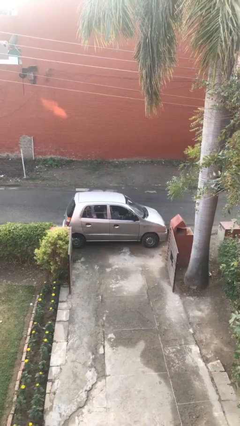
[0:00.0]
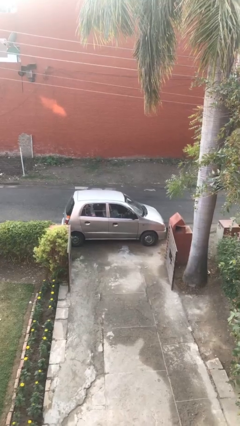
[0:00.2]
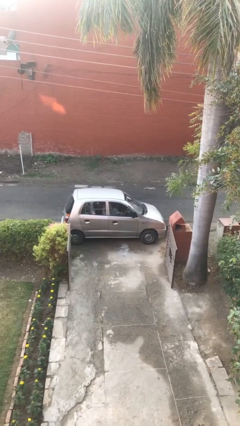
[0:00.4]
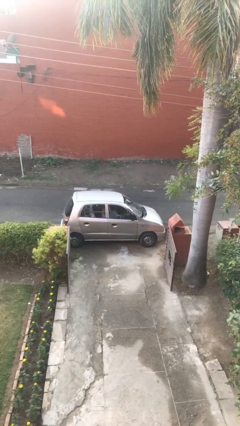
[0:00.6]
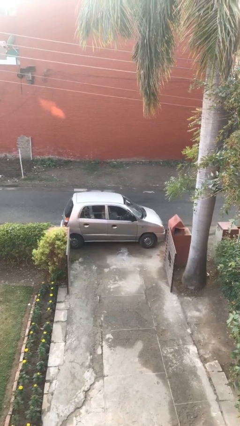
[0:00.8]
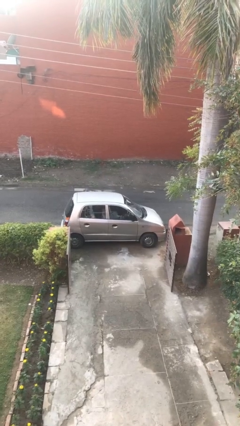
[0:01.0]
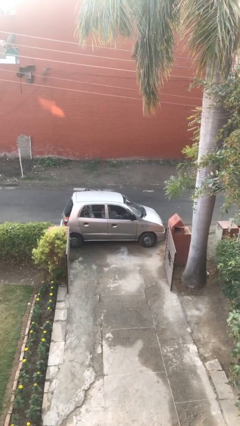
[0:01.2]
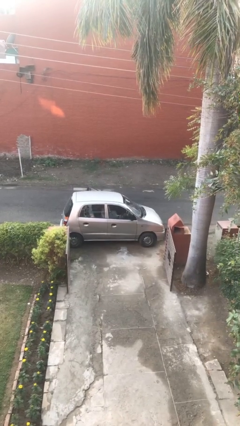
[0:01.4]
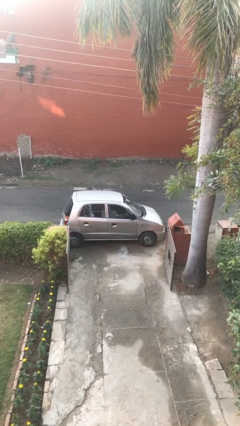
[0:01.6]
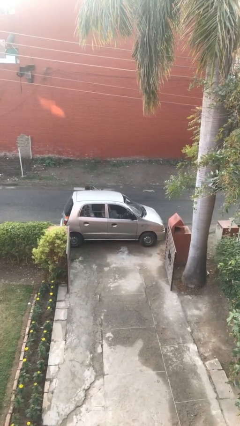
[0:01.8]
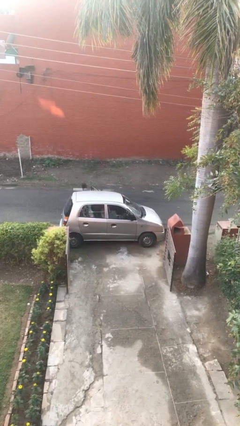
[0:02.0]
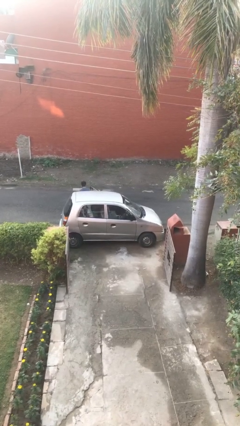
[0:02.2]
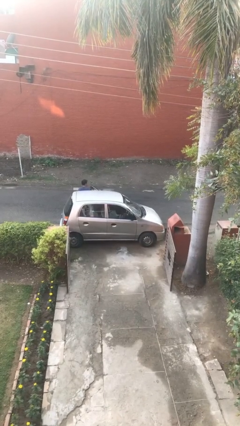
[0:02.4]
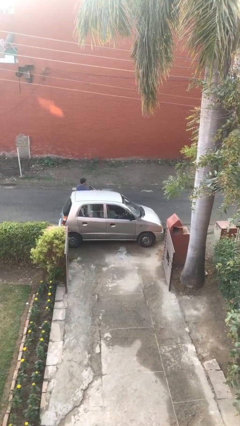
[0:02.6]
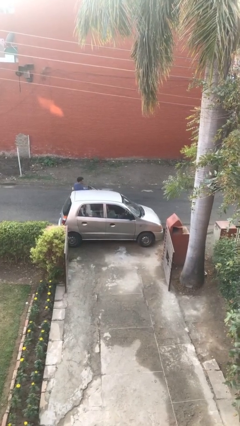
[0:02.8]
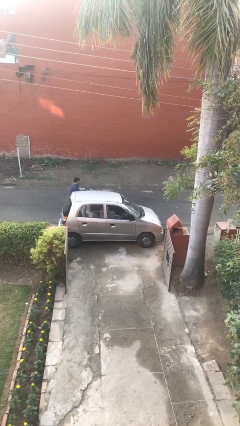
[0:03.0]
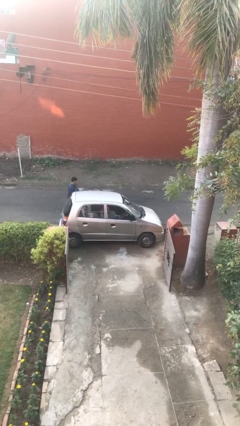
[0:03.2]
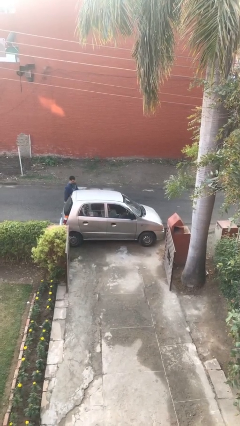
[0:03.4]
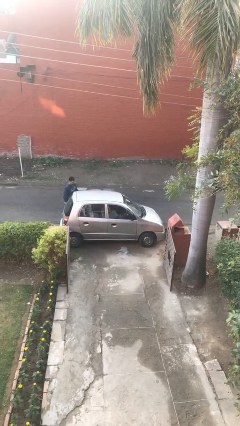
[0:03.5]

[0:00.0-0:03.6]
car drops off person

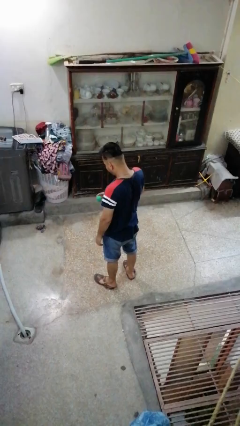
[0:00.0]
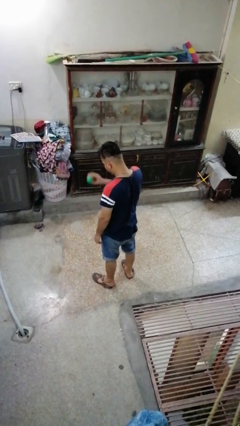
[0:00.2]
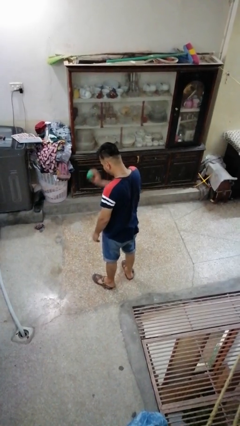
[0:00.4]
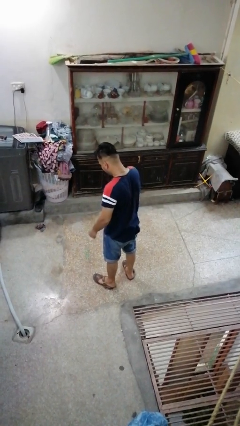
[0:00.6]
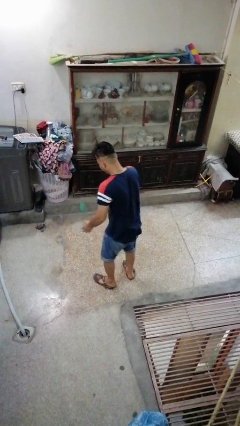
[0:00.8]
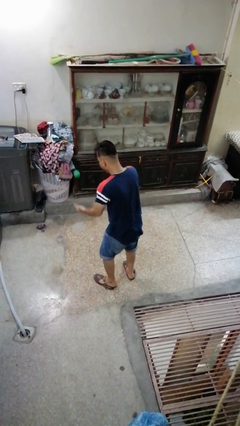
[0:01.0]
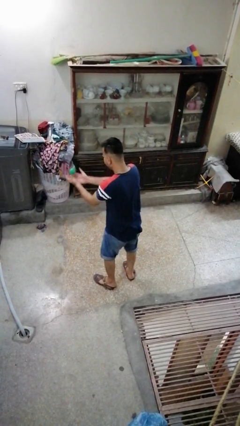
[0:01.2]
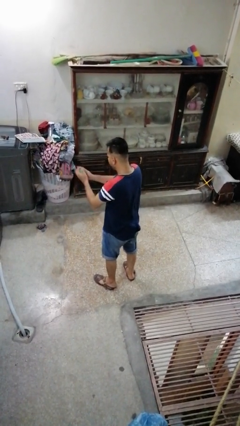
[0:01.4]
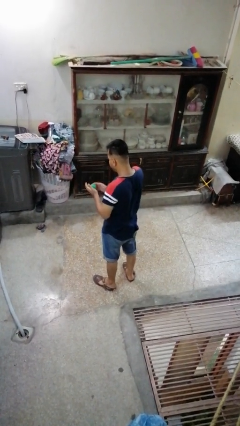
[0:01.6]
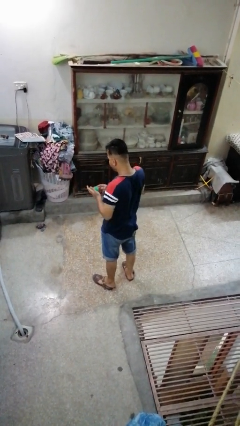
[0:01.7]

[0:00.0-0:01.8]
person bounces ball on floor

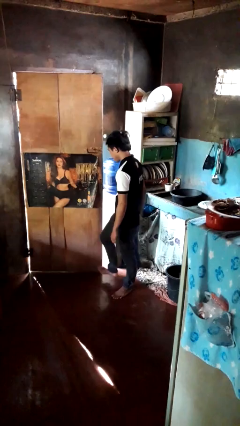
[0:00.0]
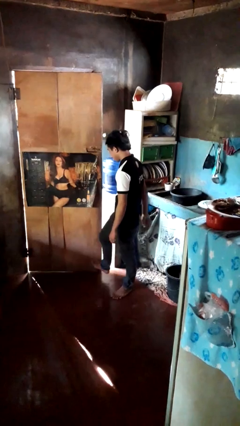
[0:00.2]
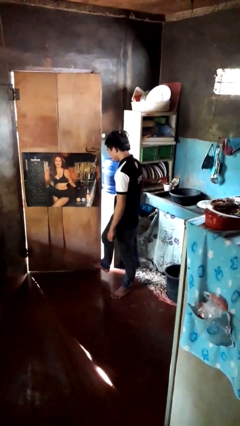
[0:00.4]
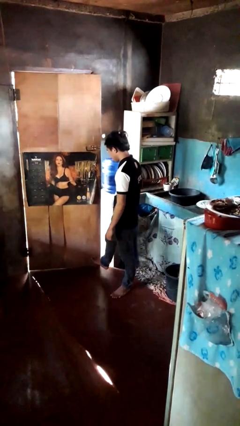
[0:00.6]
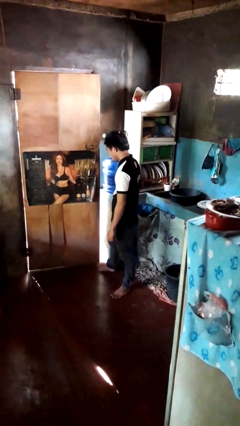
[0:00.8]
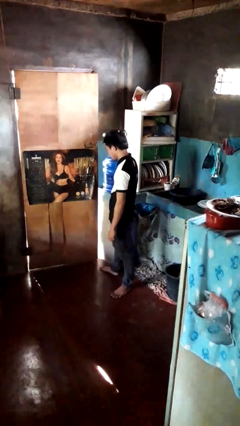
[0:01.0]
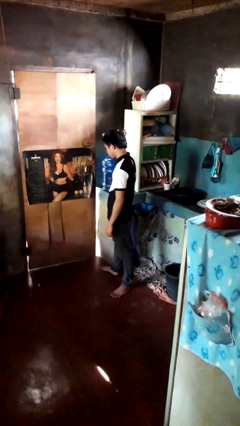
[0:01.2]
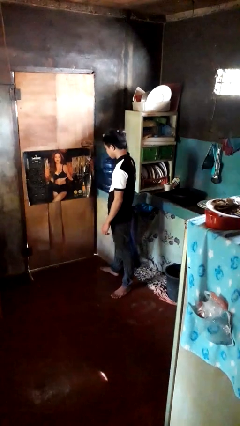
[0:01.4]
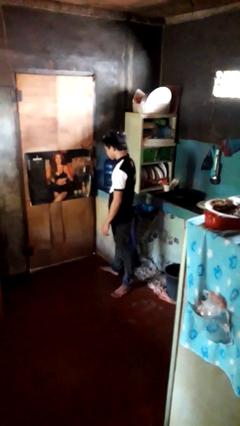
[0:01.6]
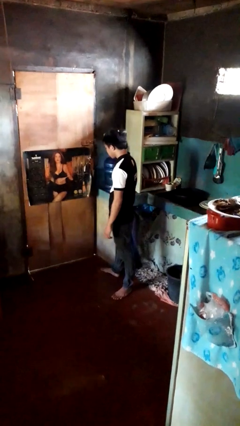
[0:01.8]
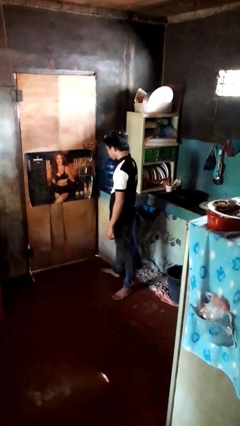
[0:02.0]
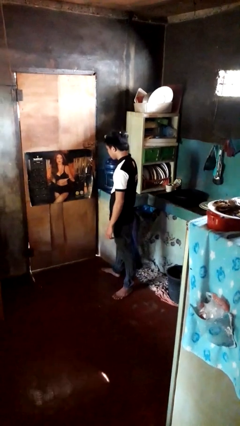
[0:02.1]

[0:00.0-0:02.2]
person closes door with foot

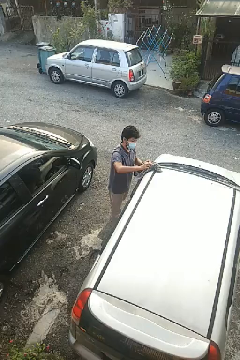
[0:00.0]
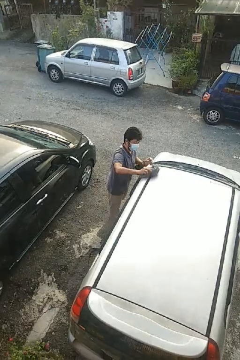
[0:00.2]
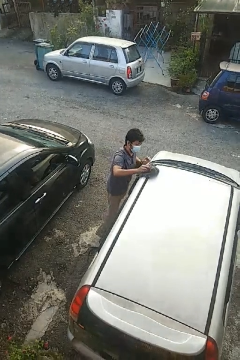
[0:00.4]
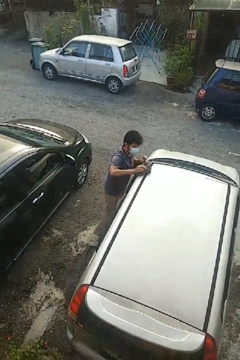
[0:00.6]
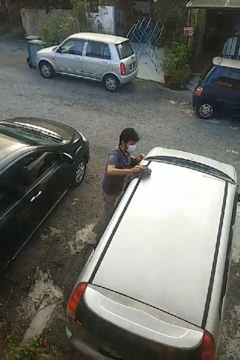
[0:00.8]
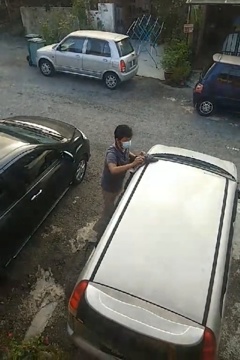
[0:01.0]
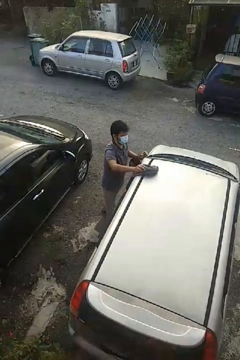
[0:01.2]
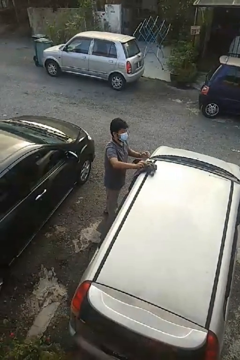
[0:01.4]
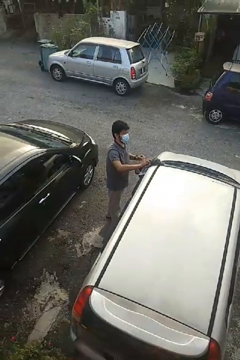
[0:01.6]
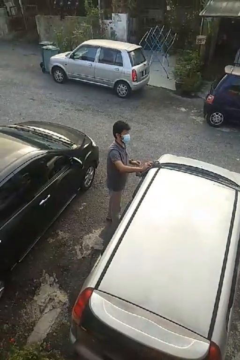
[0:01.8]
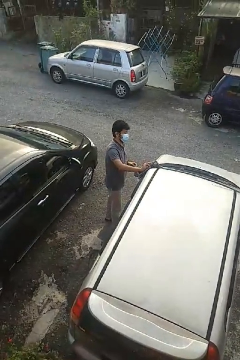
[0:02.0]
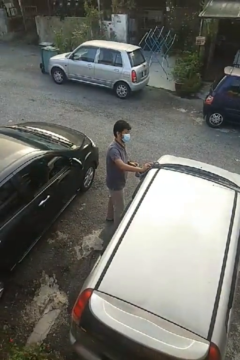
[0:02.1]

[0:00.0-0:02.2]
person polishes car with rag

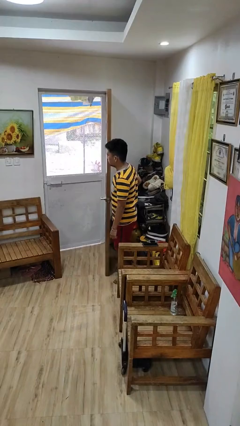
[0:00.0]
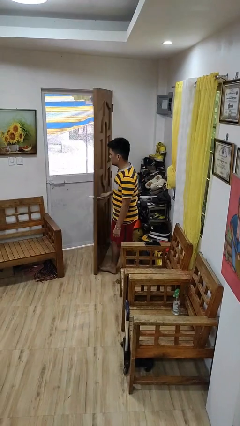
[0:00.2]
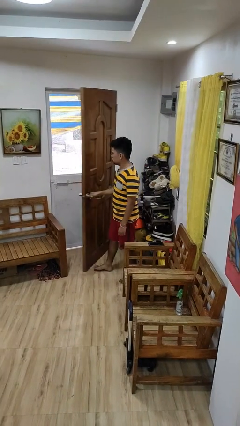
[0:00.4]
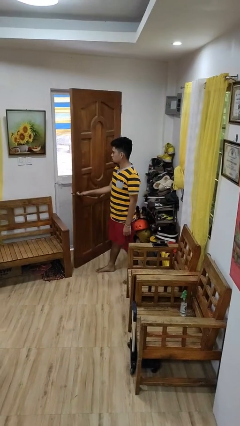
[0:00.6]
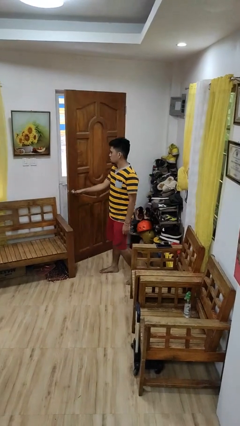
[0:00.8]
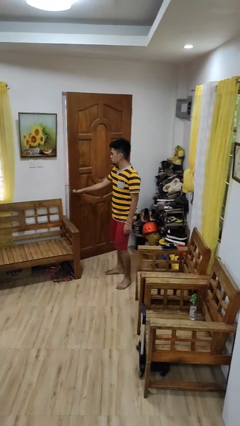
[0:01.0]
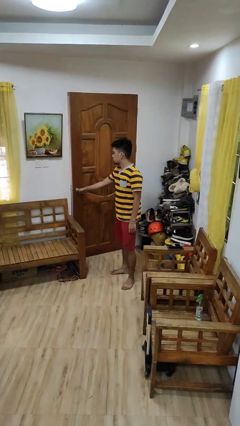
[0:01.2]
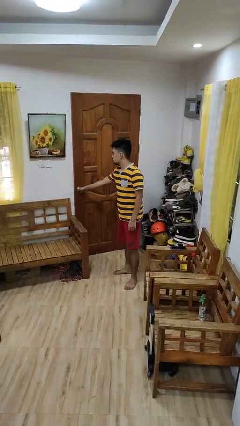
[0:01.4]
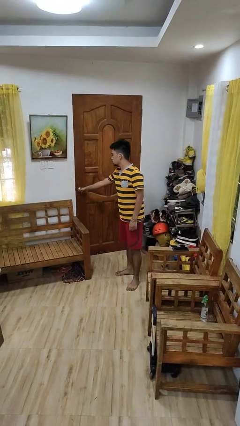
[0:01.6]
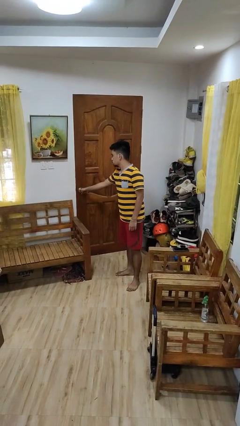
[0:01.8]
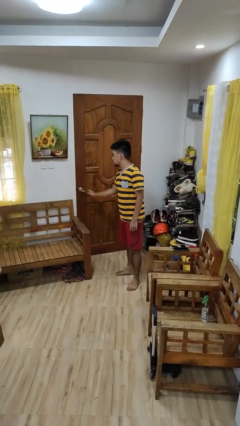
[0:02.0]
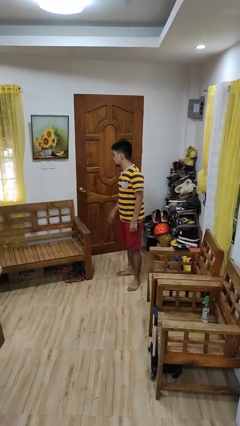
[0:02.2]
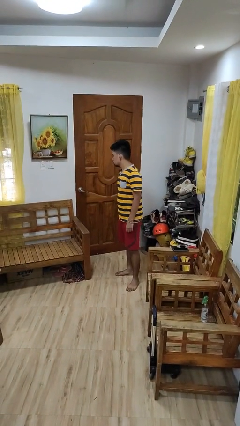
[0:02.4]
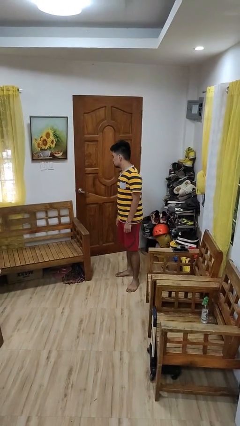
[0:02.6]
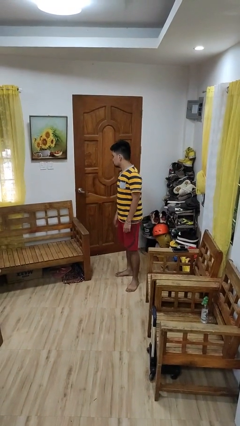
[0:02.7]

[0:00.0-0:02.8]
person closes facility door

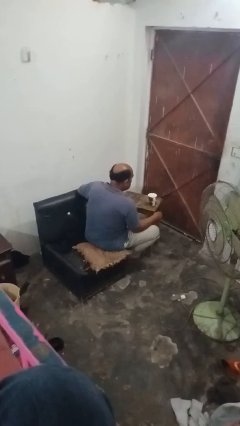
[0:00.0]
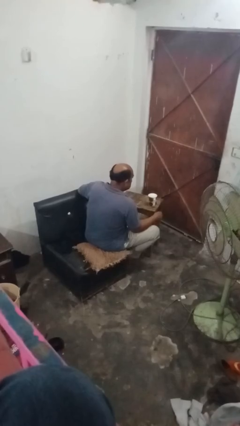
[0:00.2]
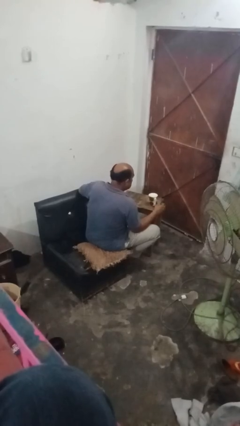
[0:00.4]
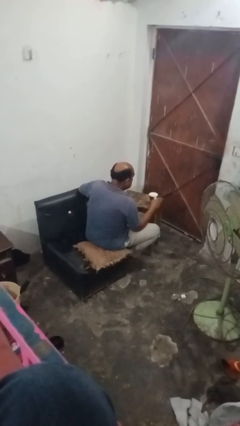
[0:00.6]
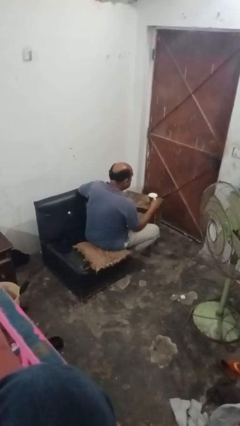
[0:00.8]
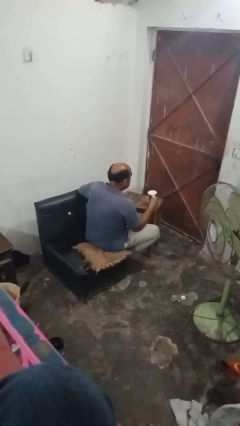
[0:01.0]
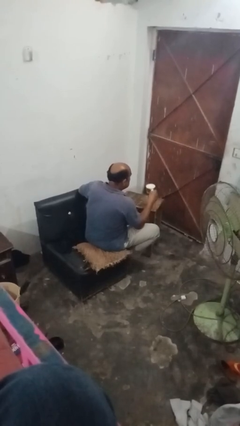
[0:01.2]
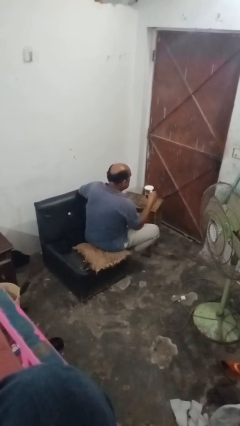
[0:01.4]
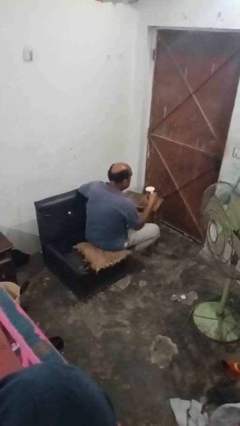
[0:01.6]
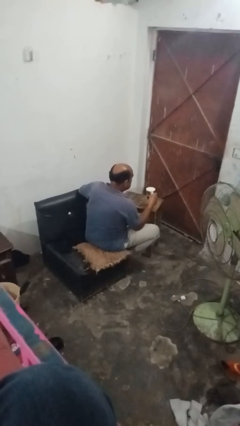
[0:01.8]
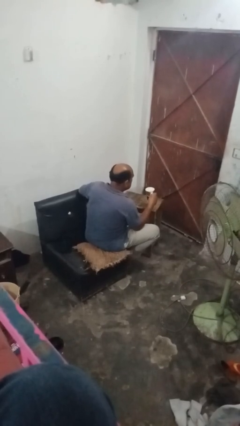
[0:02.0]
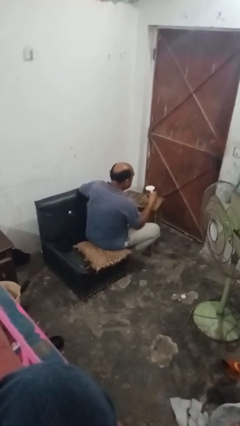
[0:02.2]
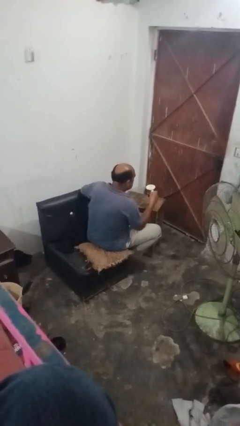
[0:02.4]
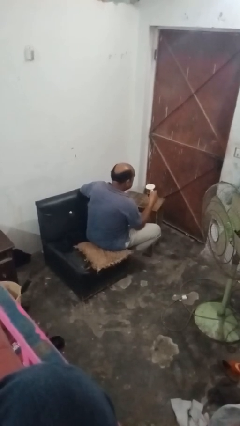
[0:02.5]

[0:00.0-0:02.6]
person picks up object from table

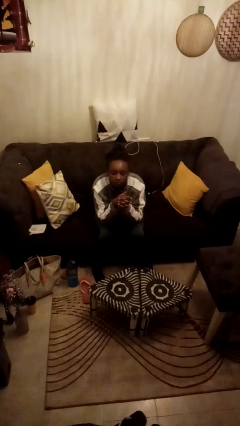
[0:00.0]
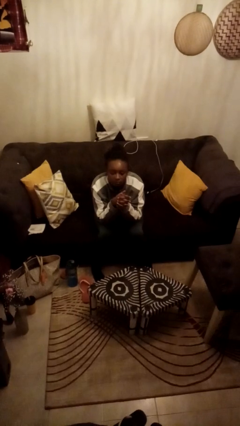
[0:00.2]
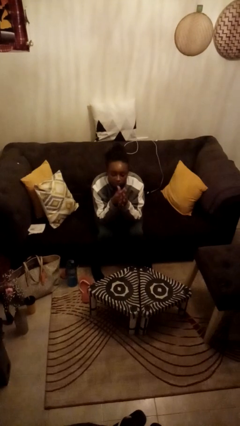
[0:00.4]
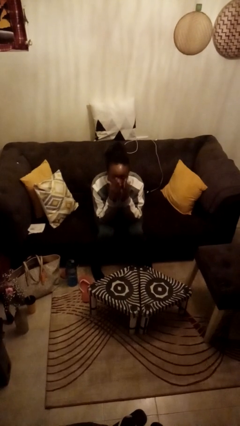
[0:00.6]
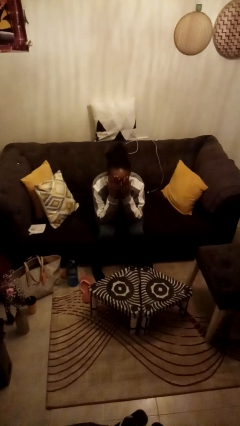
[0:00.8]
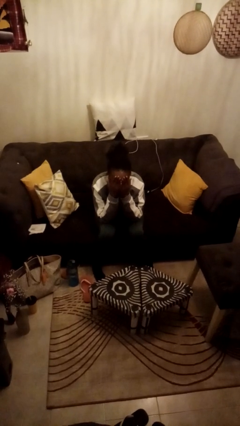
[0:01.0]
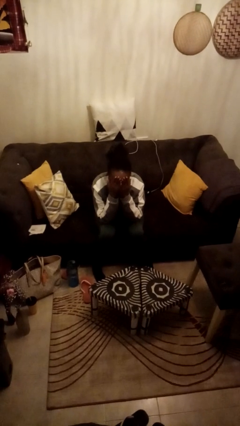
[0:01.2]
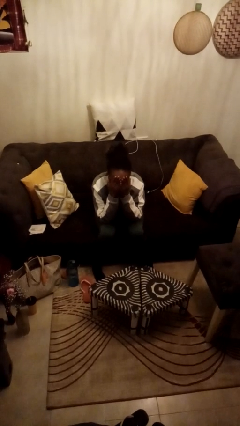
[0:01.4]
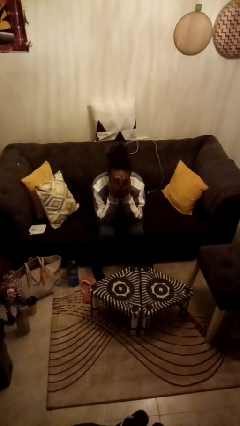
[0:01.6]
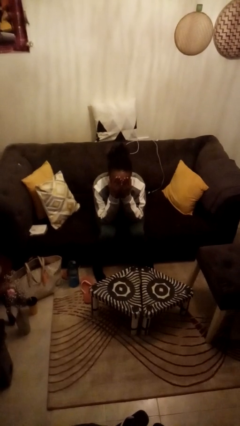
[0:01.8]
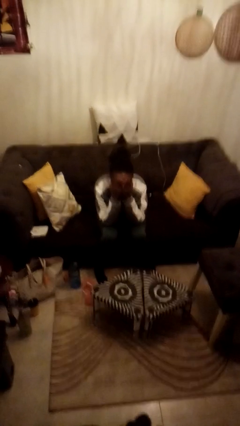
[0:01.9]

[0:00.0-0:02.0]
person covers face with hands

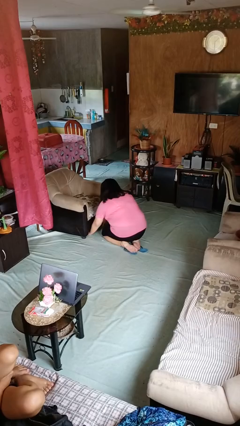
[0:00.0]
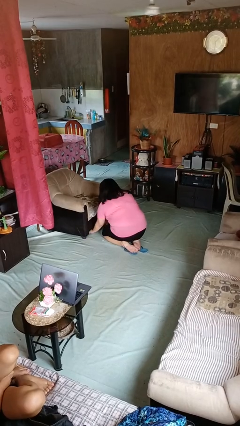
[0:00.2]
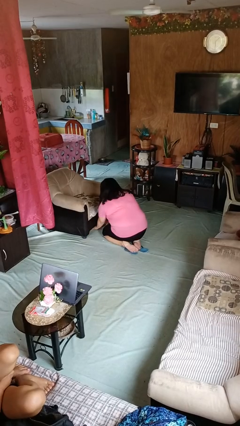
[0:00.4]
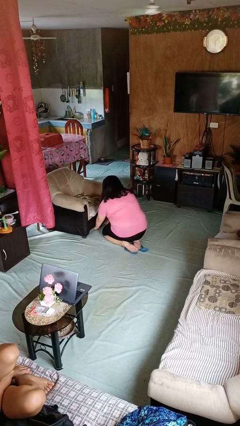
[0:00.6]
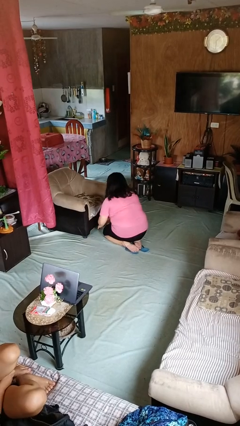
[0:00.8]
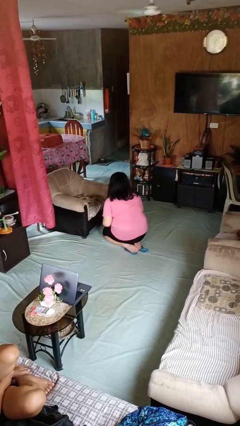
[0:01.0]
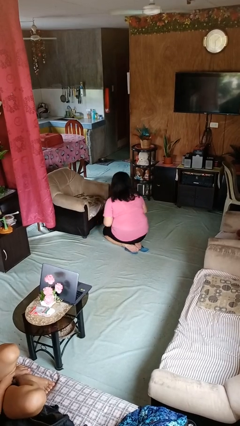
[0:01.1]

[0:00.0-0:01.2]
person searches under couch
